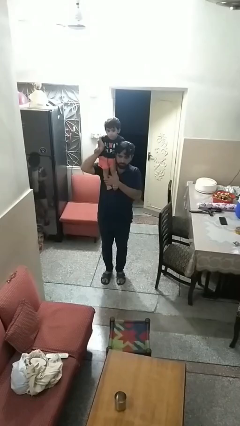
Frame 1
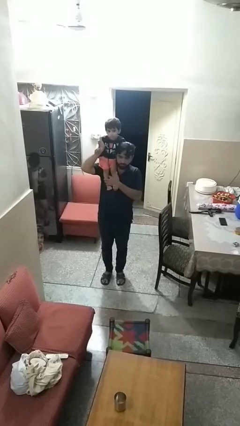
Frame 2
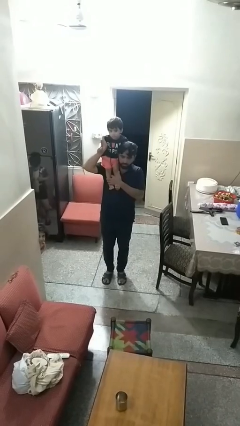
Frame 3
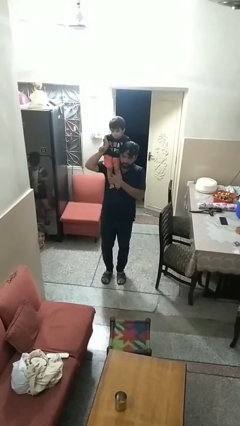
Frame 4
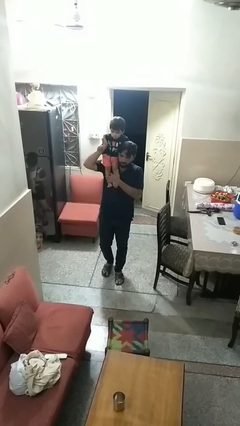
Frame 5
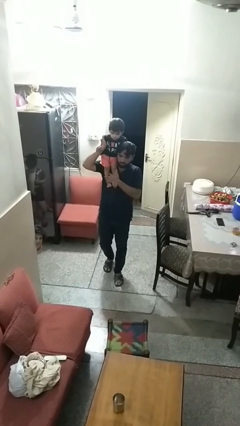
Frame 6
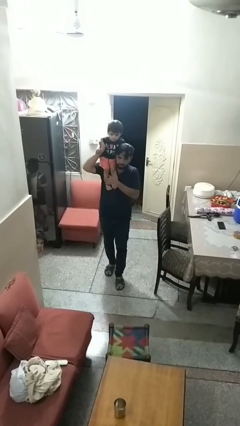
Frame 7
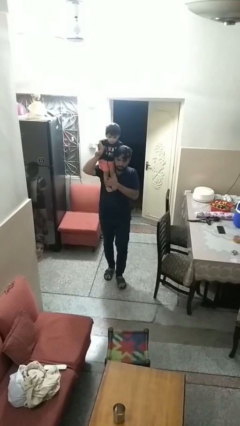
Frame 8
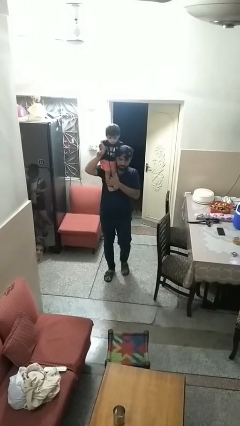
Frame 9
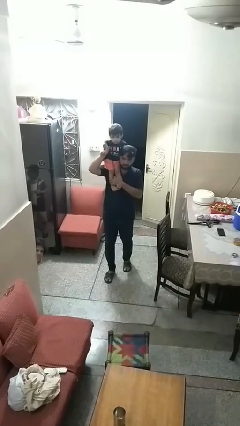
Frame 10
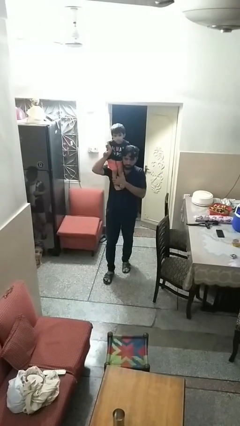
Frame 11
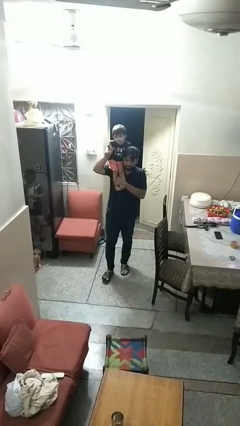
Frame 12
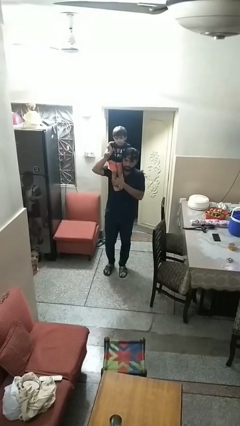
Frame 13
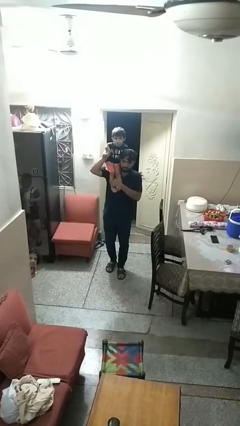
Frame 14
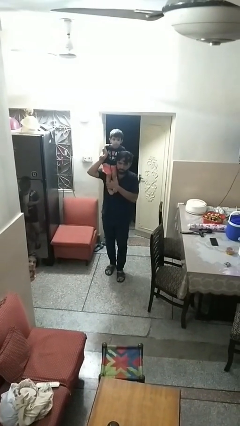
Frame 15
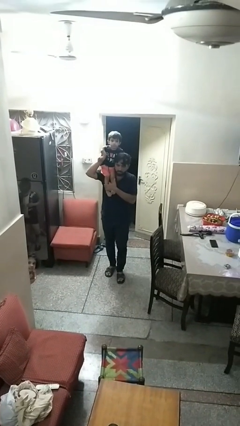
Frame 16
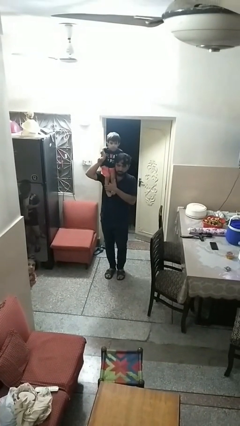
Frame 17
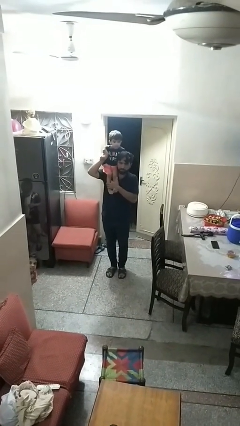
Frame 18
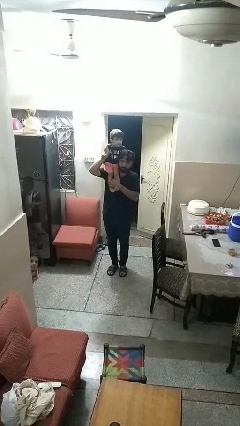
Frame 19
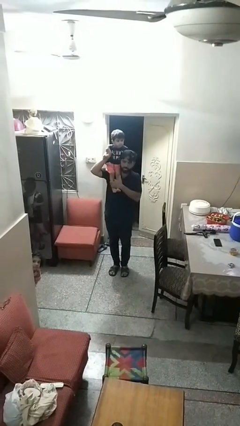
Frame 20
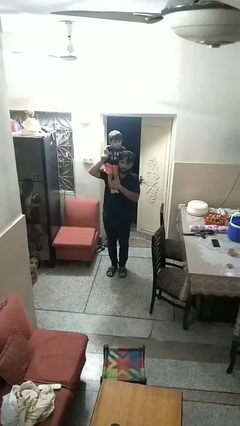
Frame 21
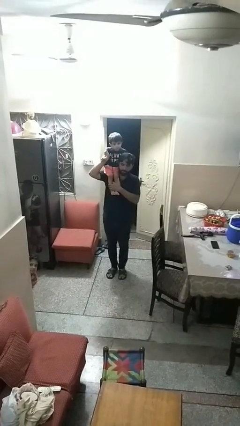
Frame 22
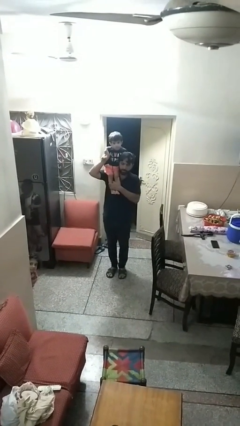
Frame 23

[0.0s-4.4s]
person carries person on shoulders

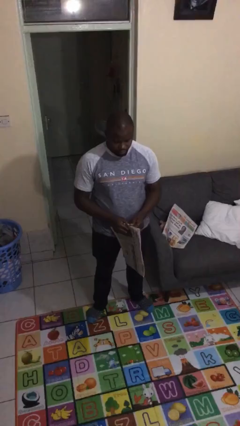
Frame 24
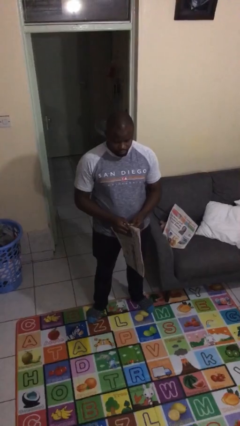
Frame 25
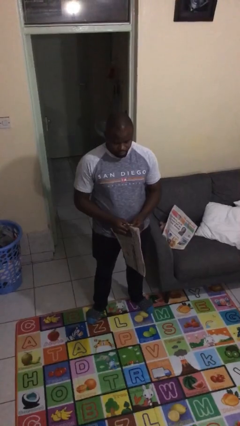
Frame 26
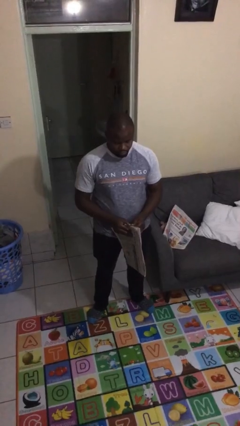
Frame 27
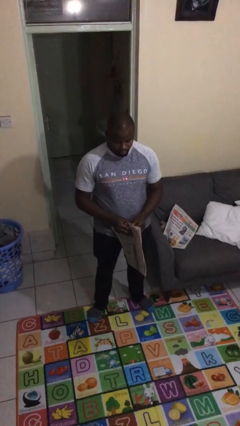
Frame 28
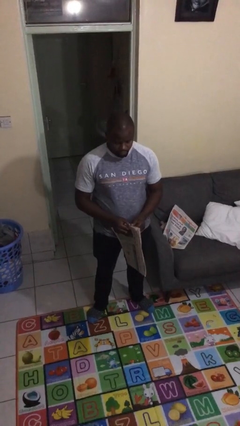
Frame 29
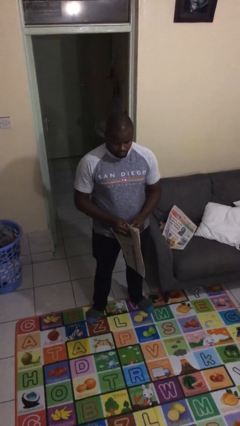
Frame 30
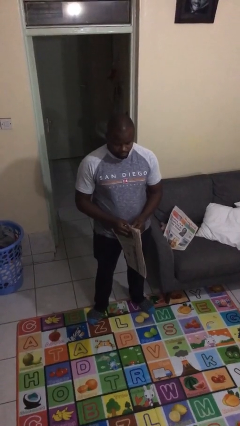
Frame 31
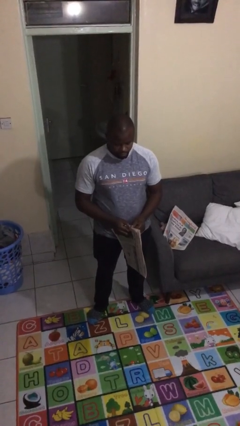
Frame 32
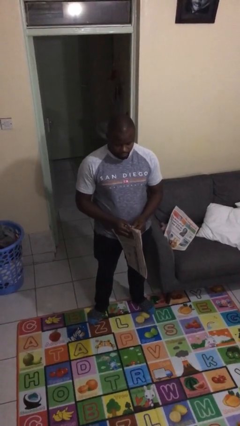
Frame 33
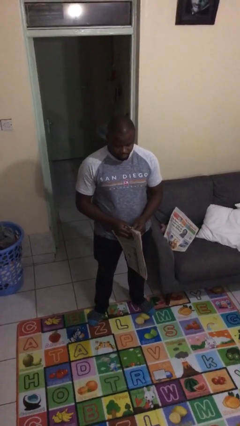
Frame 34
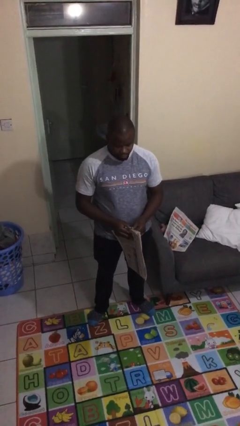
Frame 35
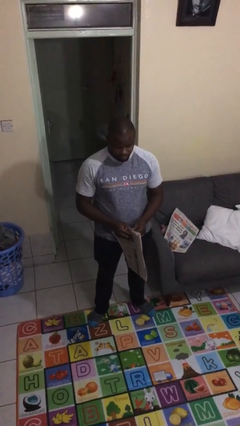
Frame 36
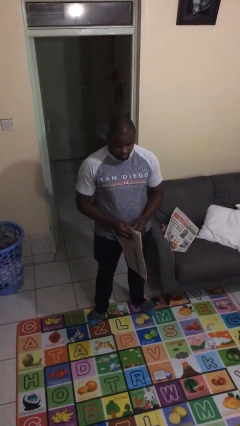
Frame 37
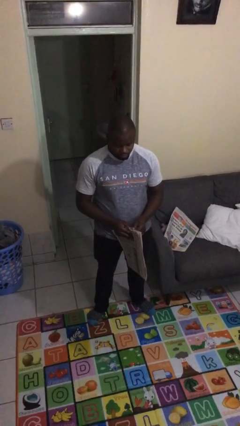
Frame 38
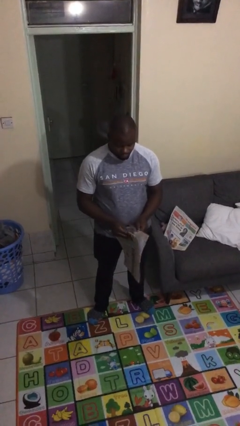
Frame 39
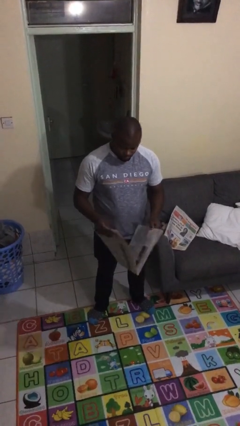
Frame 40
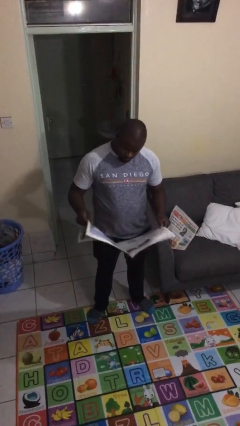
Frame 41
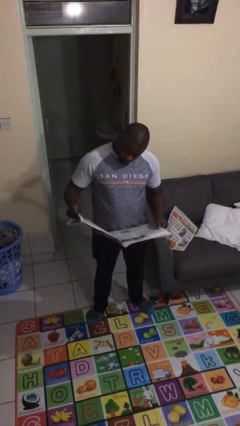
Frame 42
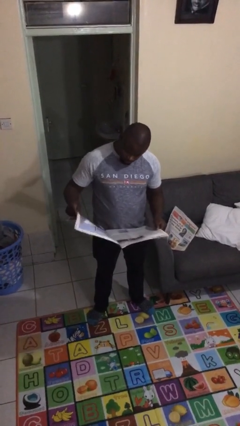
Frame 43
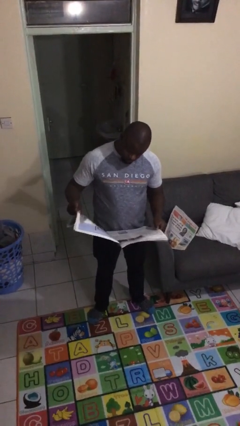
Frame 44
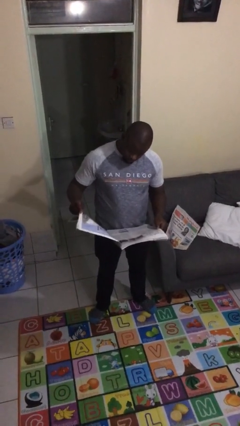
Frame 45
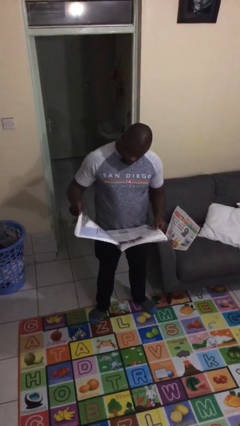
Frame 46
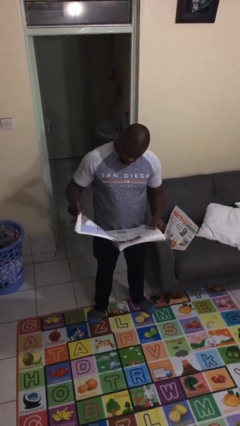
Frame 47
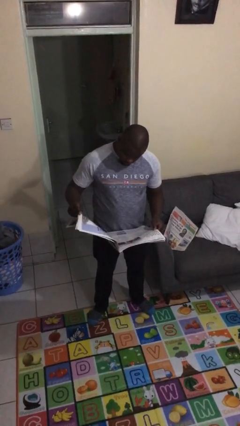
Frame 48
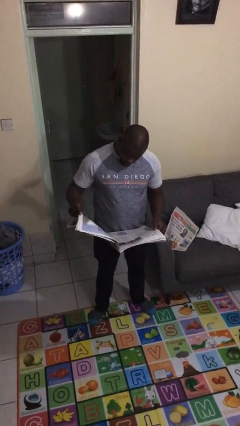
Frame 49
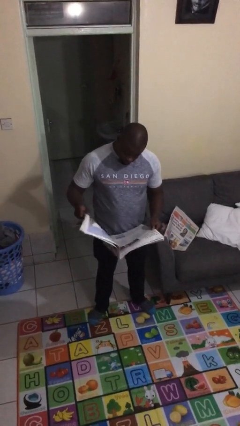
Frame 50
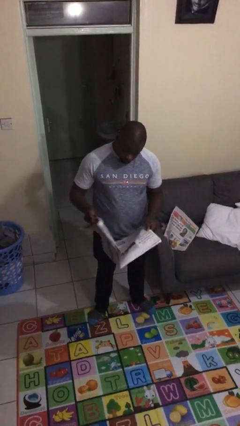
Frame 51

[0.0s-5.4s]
person reads newspaper

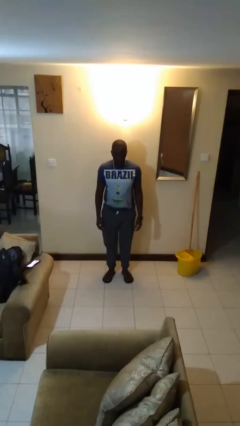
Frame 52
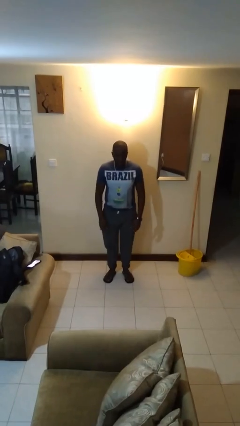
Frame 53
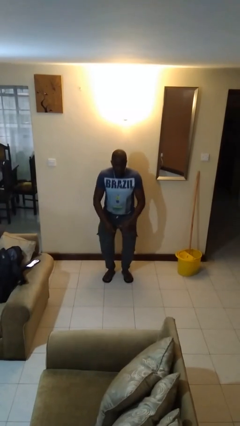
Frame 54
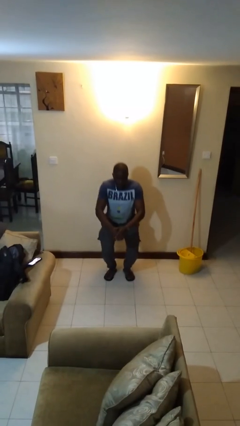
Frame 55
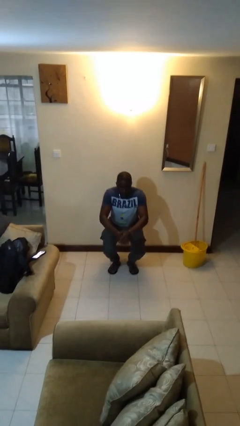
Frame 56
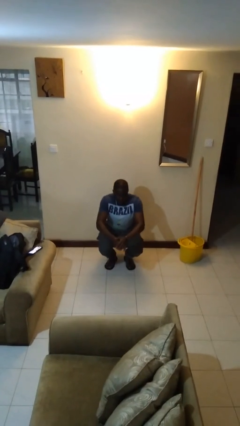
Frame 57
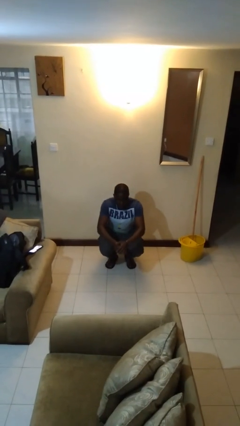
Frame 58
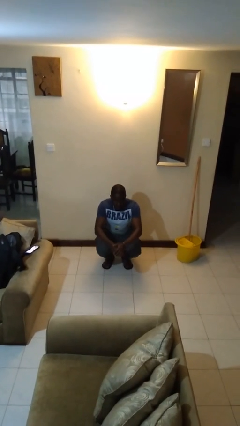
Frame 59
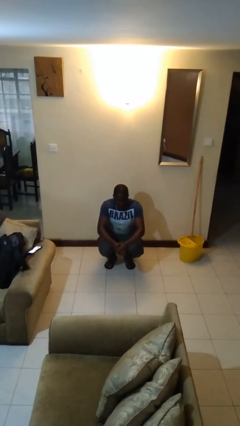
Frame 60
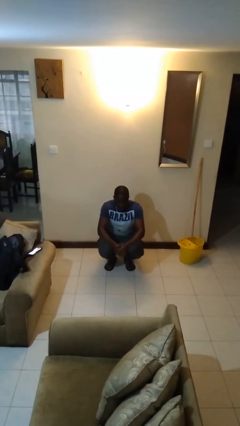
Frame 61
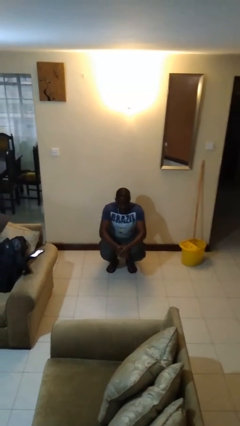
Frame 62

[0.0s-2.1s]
person squats

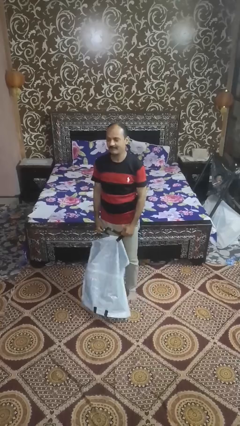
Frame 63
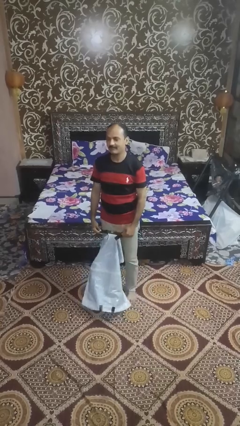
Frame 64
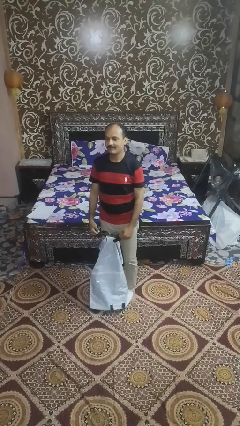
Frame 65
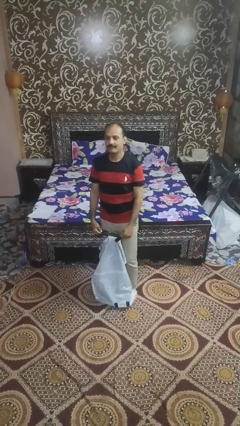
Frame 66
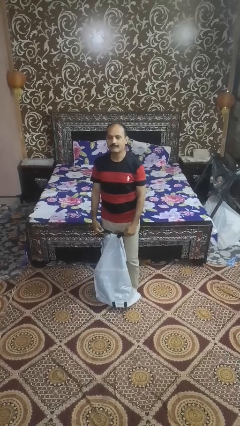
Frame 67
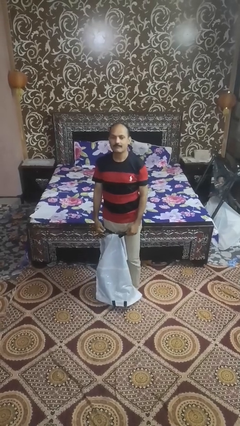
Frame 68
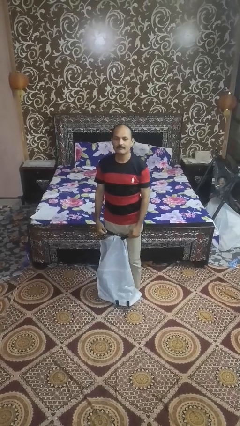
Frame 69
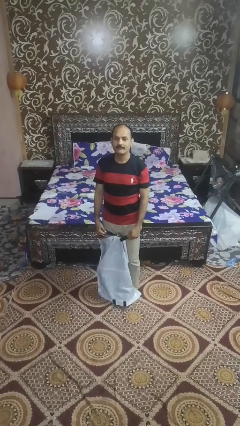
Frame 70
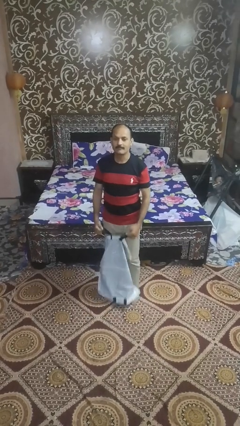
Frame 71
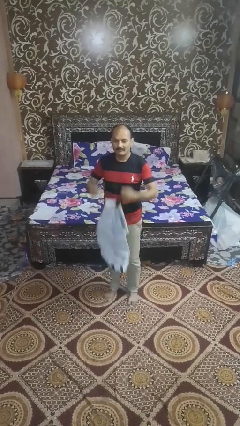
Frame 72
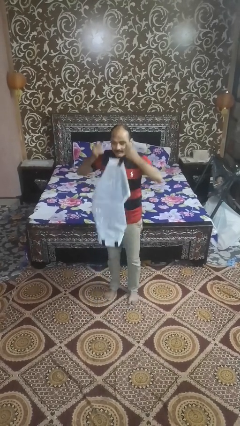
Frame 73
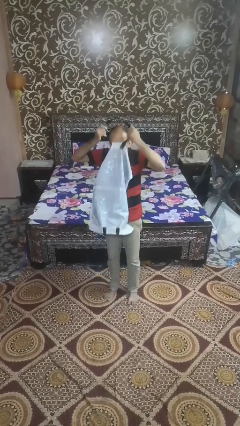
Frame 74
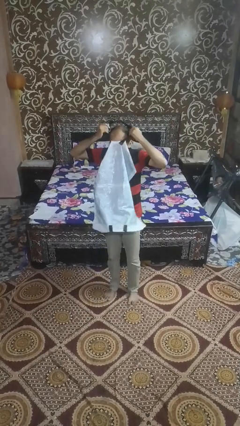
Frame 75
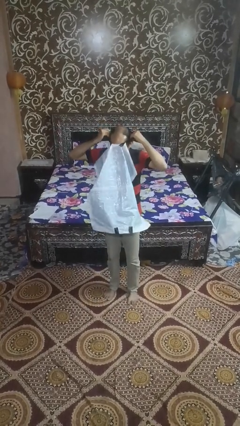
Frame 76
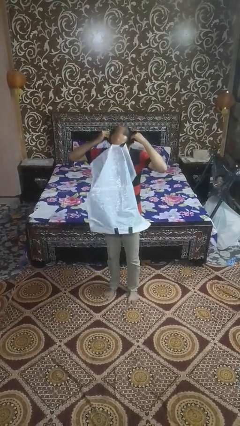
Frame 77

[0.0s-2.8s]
person tears paper

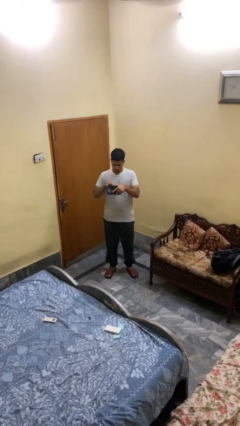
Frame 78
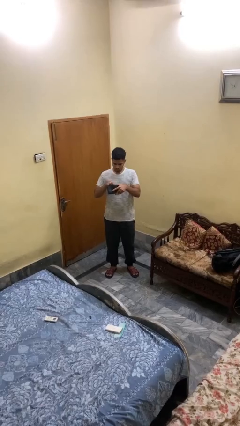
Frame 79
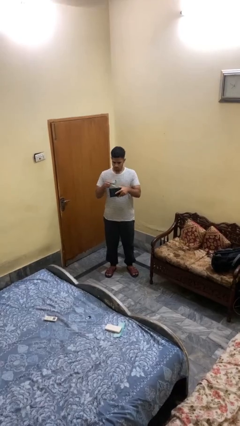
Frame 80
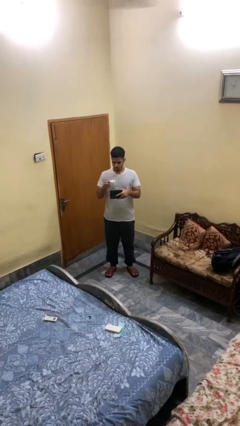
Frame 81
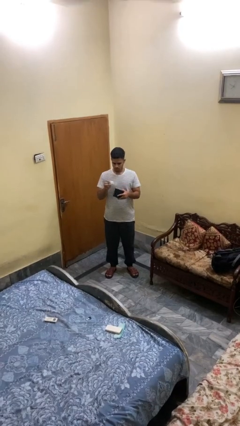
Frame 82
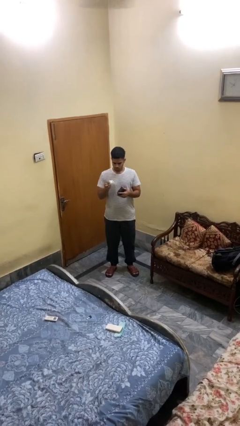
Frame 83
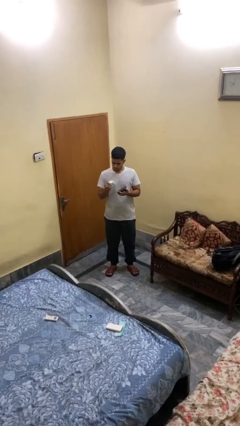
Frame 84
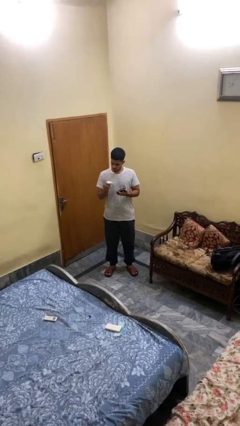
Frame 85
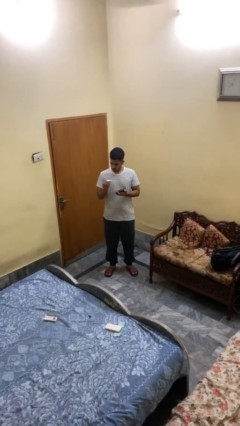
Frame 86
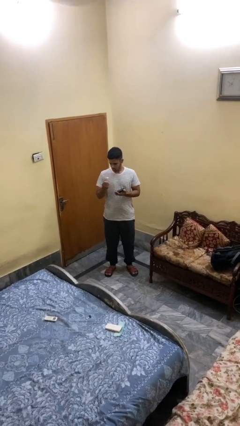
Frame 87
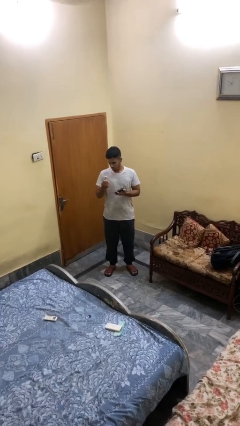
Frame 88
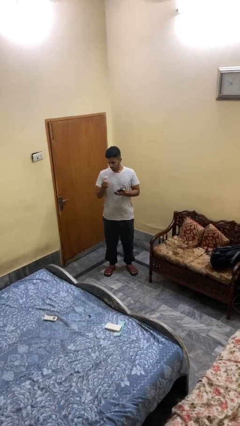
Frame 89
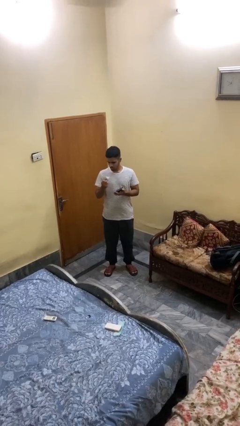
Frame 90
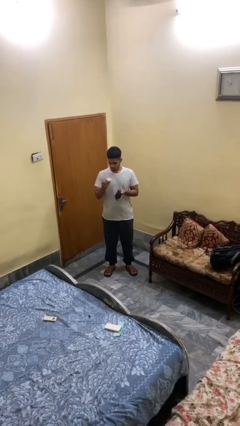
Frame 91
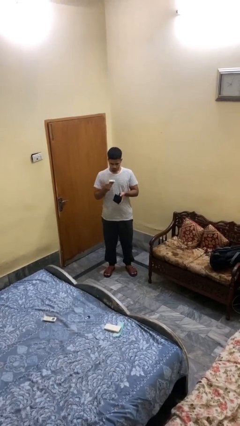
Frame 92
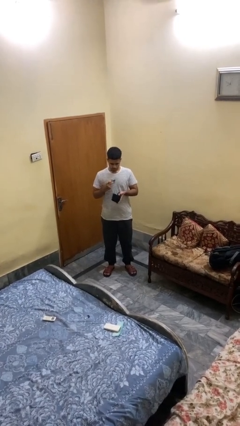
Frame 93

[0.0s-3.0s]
person takes object from purse
